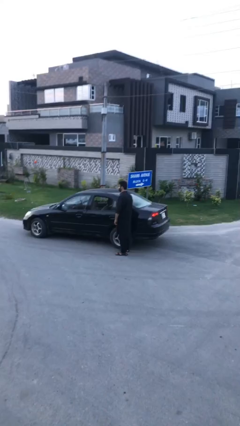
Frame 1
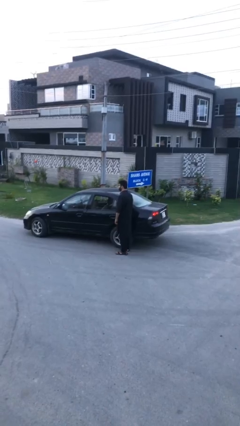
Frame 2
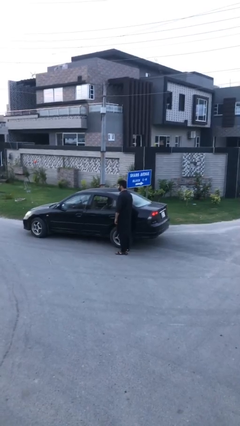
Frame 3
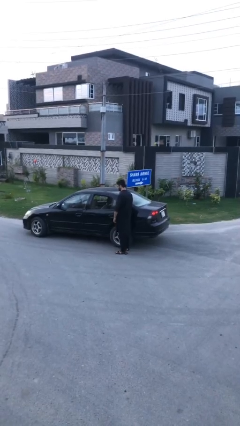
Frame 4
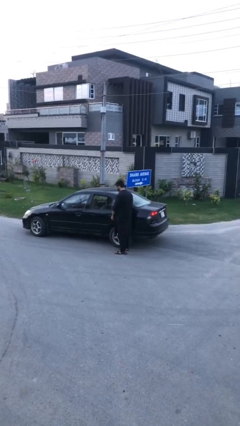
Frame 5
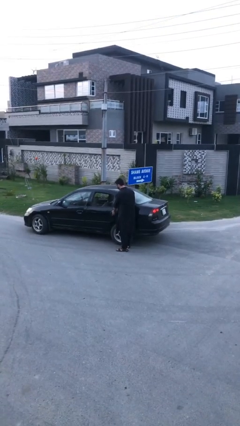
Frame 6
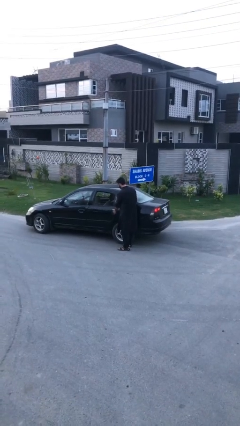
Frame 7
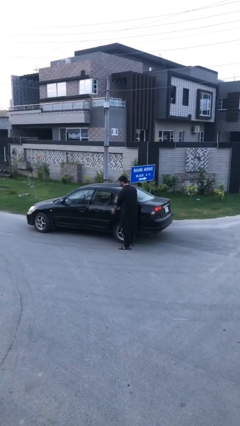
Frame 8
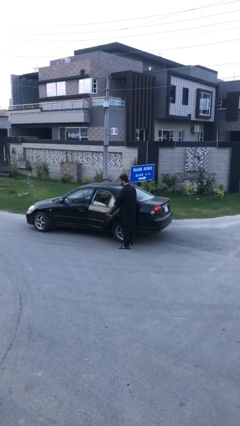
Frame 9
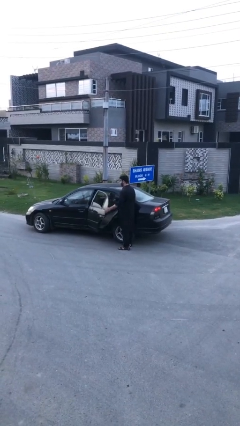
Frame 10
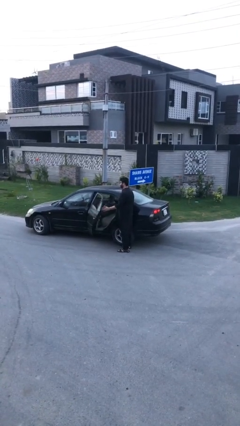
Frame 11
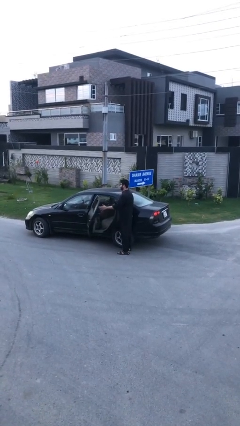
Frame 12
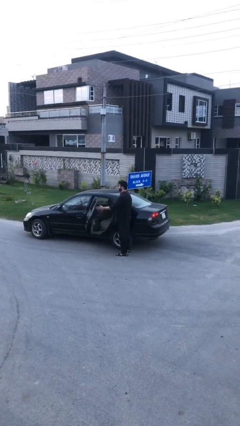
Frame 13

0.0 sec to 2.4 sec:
person opens car door

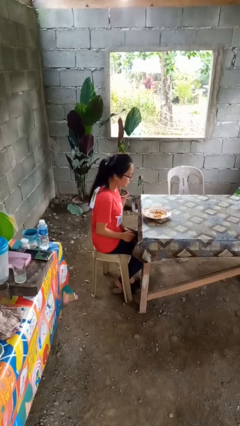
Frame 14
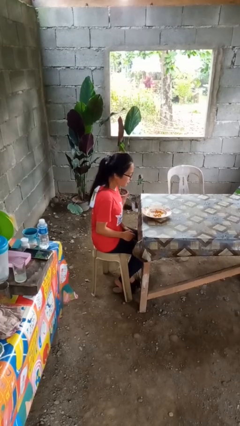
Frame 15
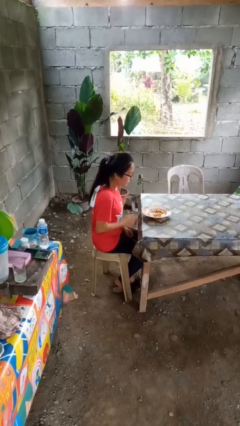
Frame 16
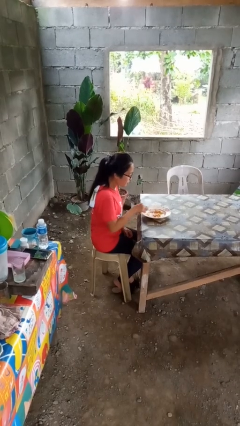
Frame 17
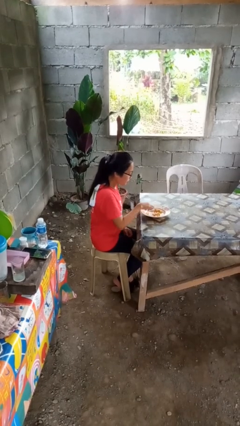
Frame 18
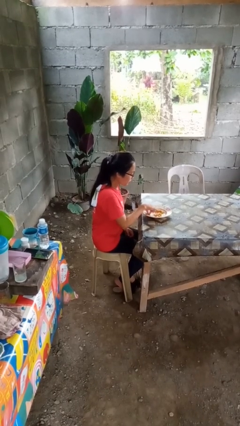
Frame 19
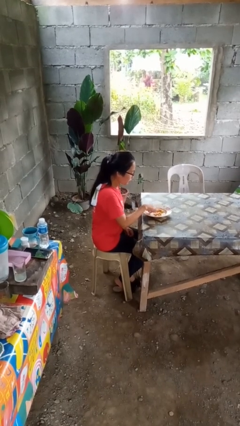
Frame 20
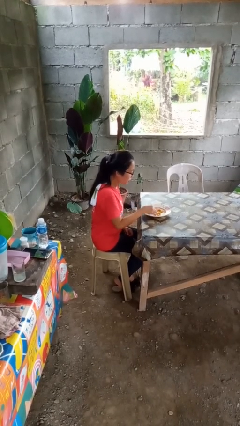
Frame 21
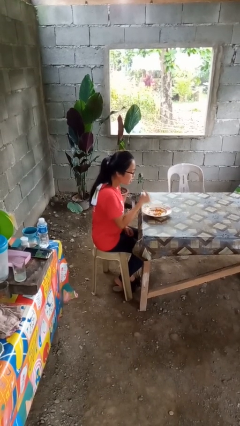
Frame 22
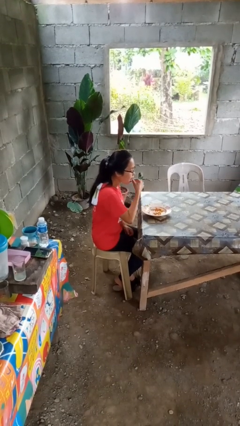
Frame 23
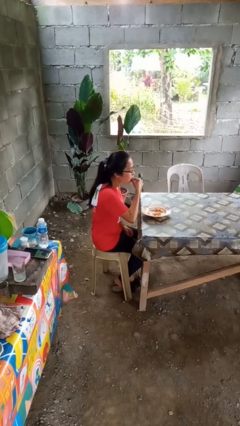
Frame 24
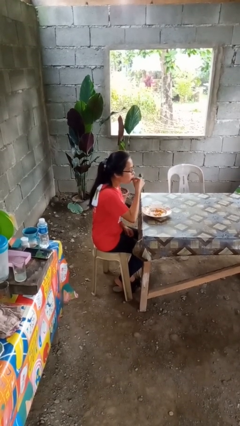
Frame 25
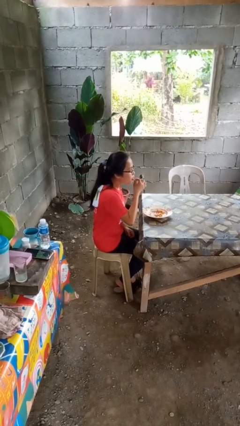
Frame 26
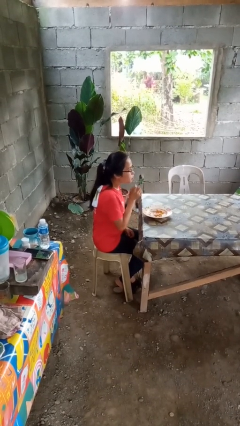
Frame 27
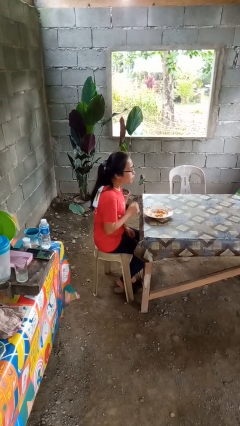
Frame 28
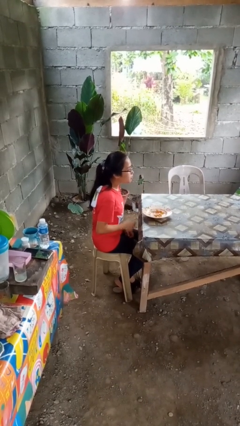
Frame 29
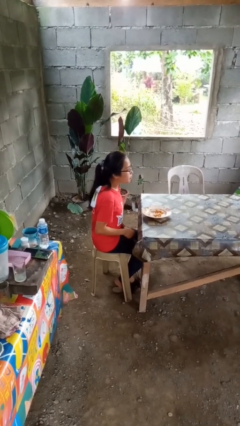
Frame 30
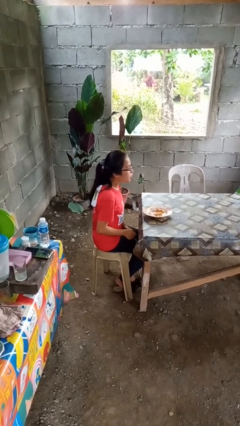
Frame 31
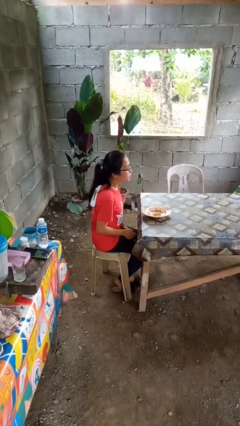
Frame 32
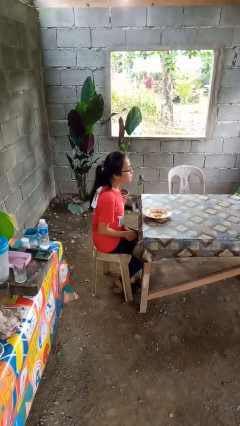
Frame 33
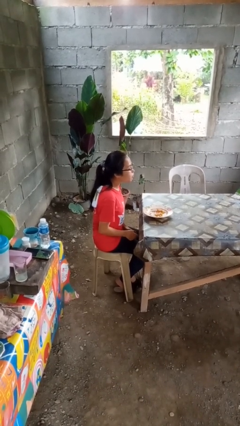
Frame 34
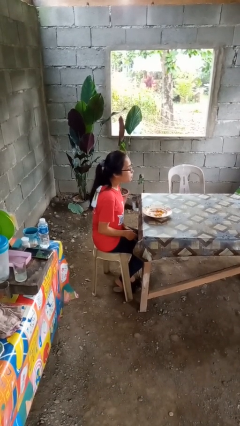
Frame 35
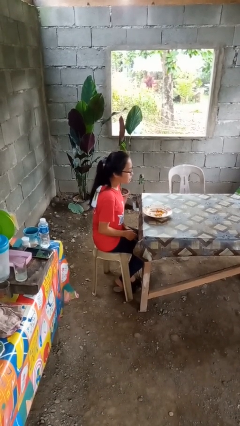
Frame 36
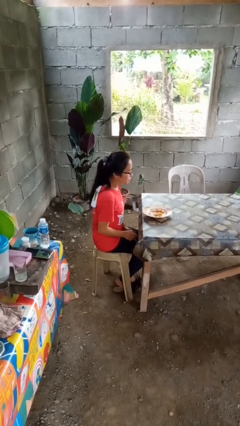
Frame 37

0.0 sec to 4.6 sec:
person eats with hands

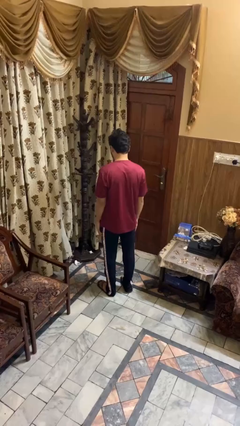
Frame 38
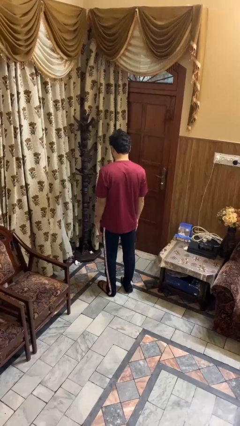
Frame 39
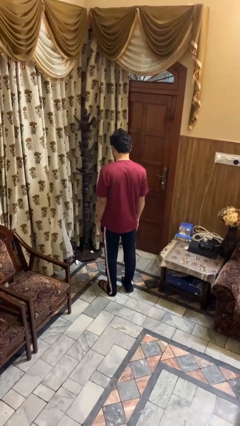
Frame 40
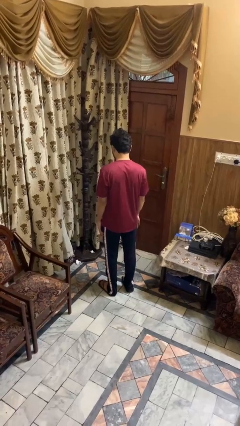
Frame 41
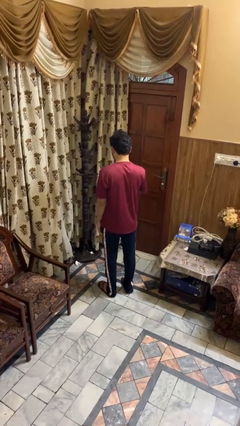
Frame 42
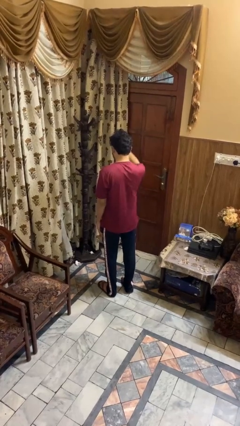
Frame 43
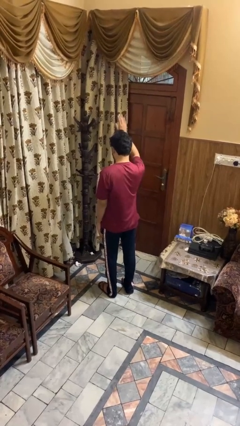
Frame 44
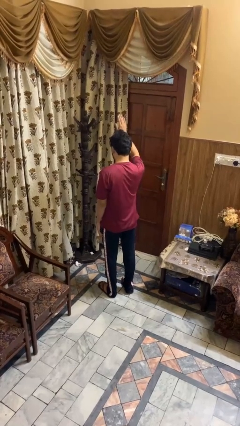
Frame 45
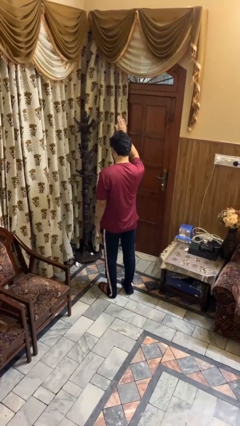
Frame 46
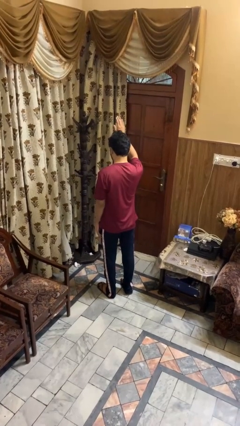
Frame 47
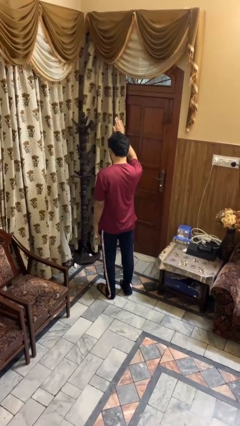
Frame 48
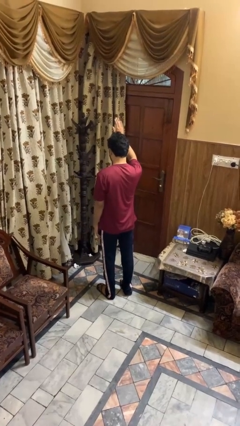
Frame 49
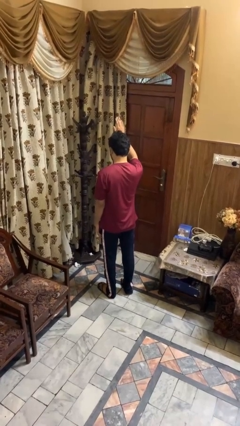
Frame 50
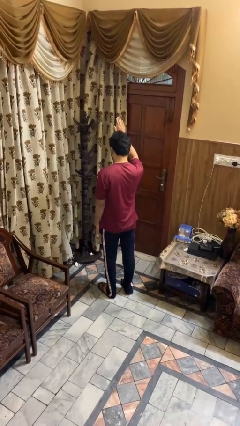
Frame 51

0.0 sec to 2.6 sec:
person gestures raise hand

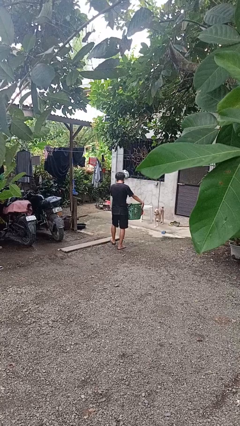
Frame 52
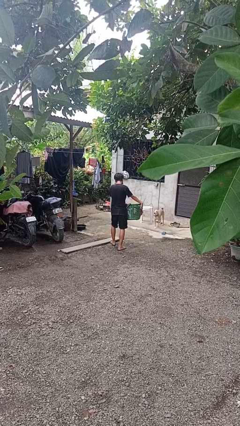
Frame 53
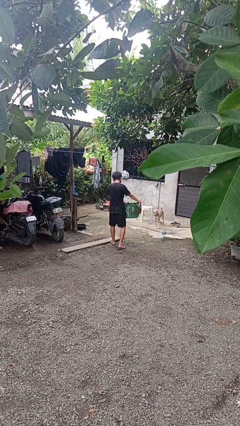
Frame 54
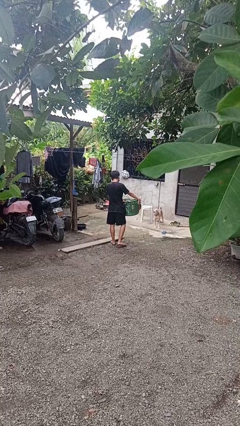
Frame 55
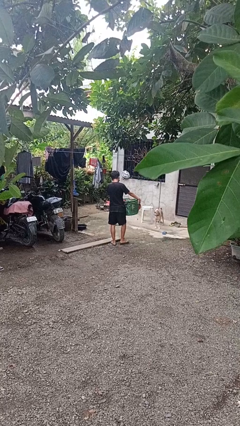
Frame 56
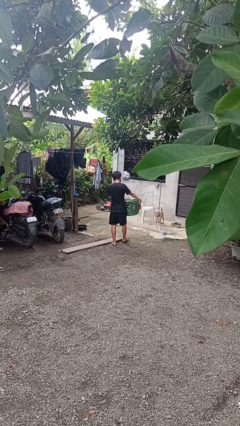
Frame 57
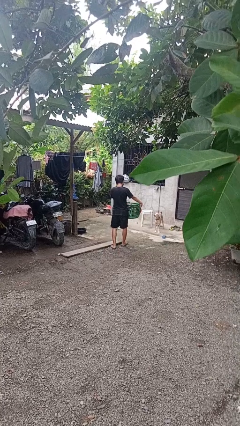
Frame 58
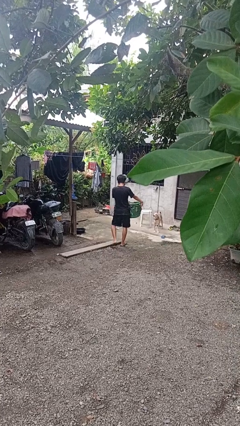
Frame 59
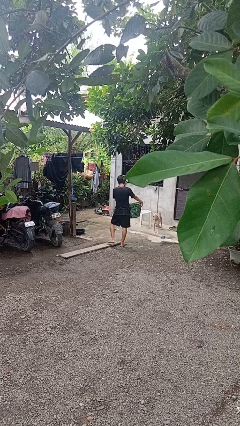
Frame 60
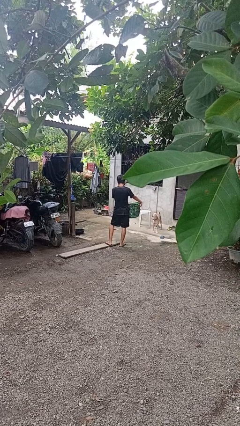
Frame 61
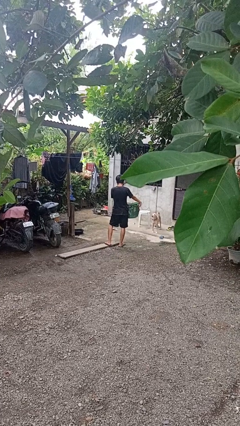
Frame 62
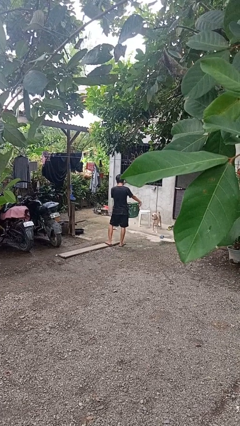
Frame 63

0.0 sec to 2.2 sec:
person carries laundry basket

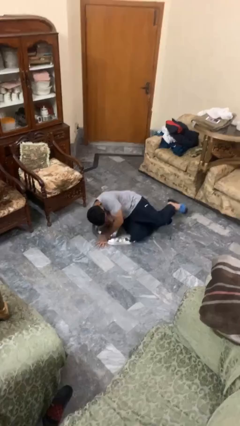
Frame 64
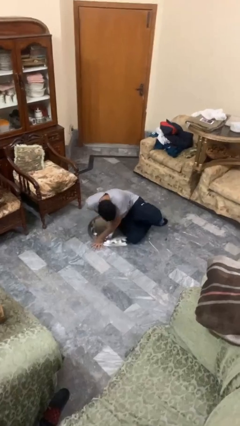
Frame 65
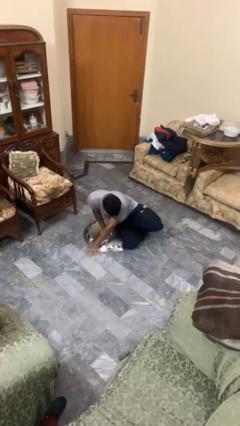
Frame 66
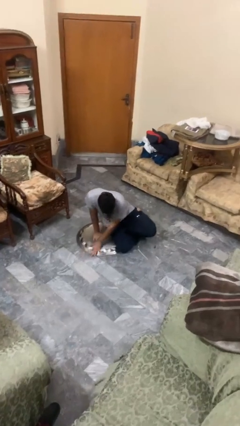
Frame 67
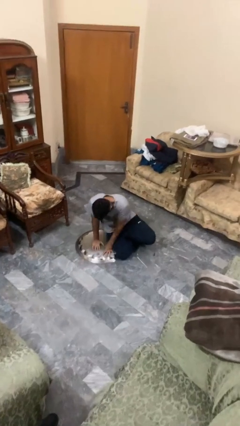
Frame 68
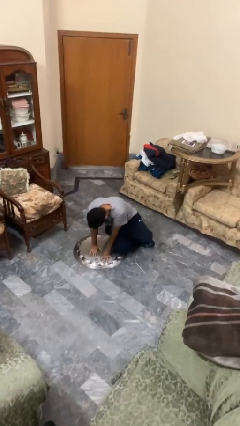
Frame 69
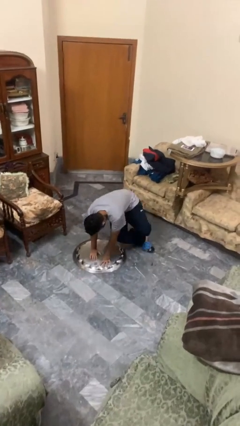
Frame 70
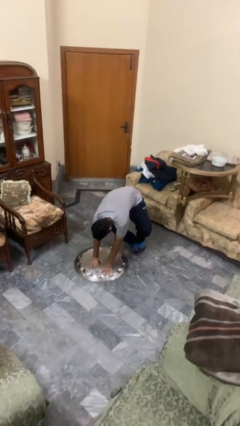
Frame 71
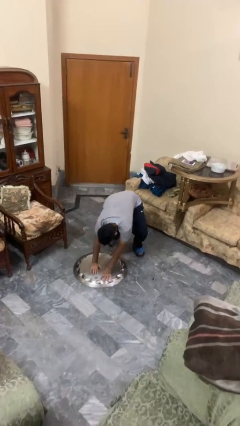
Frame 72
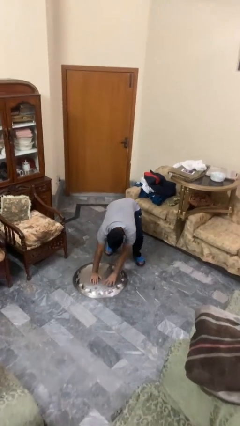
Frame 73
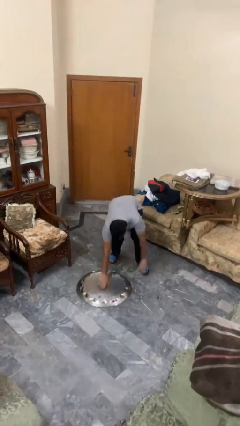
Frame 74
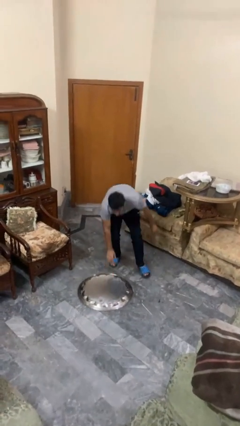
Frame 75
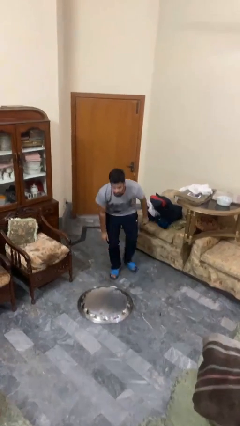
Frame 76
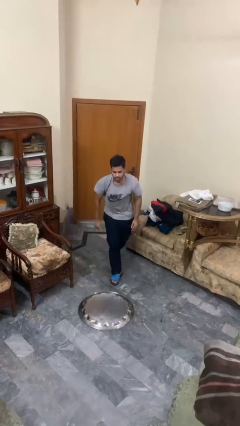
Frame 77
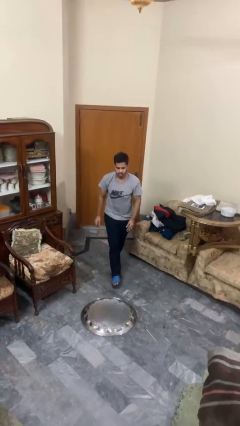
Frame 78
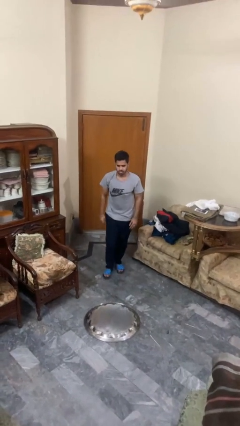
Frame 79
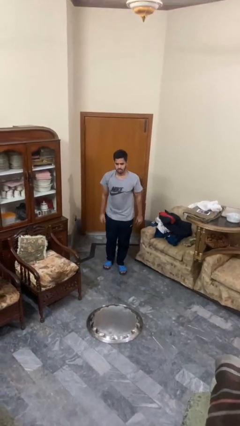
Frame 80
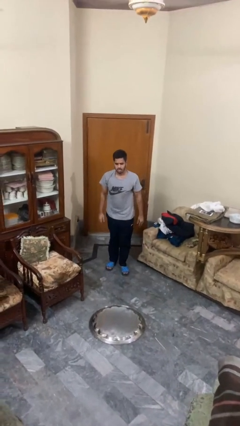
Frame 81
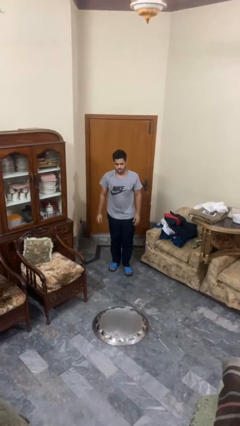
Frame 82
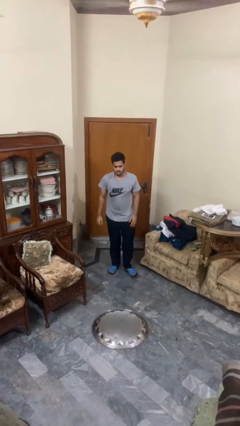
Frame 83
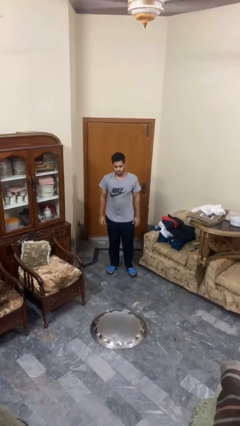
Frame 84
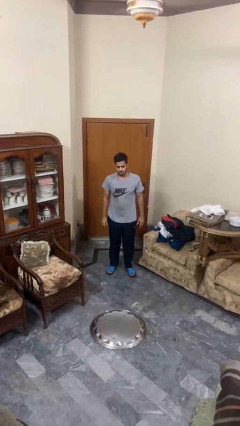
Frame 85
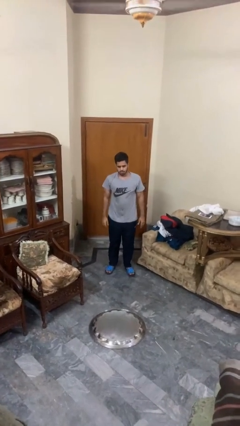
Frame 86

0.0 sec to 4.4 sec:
person stands up from floor

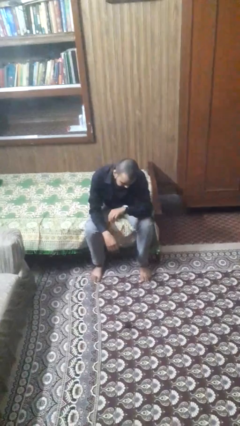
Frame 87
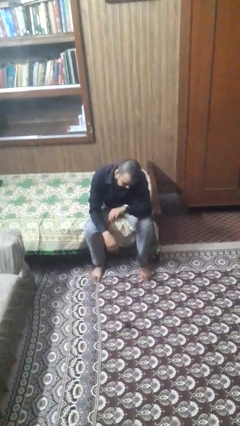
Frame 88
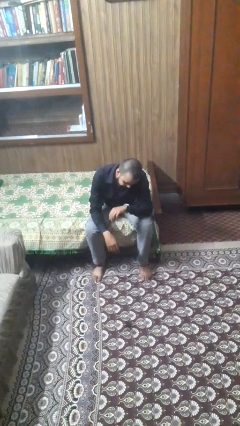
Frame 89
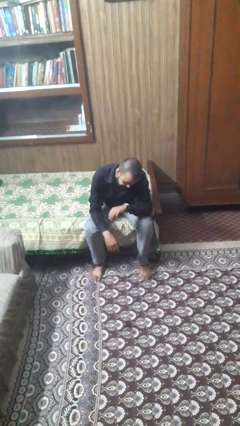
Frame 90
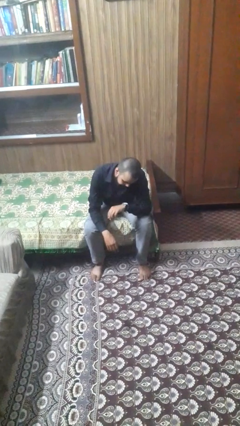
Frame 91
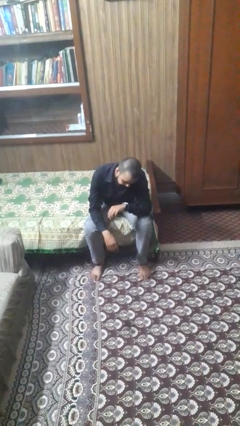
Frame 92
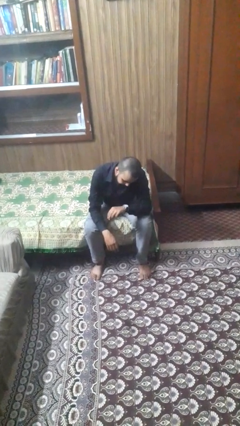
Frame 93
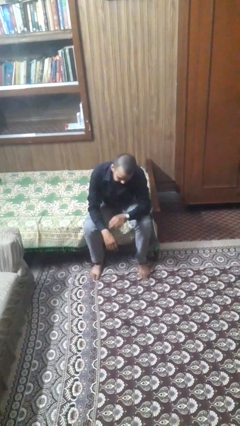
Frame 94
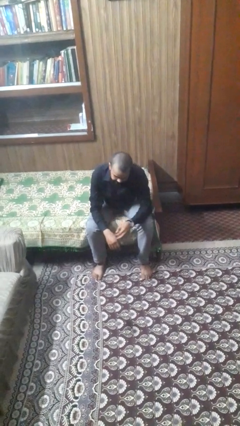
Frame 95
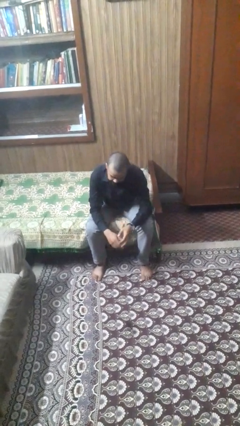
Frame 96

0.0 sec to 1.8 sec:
person looks at hands in lap
